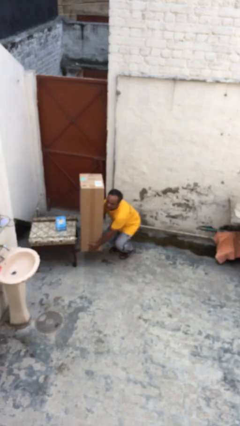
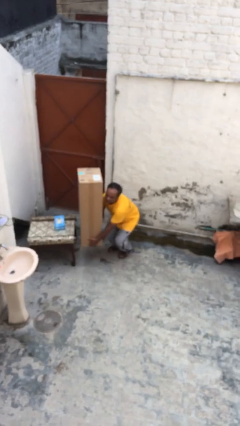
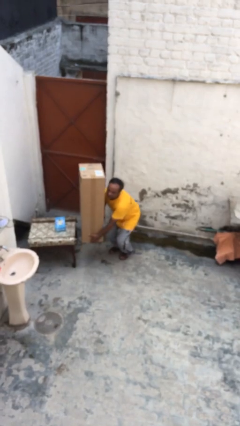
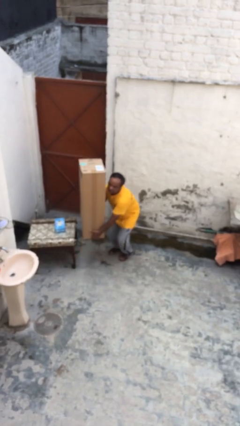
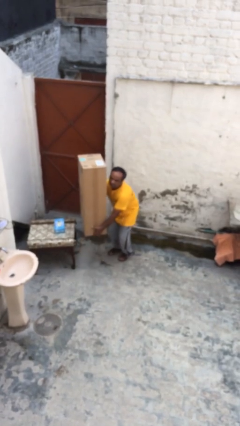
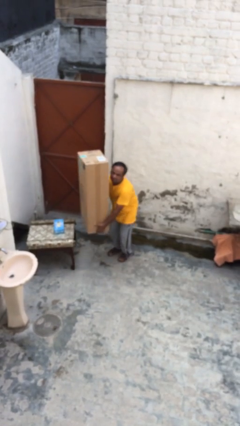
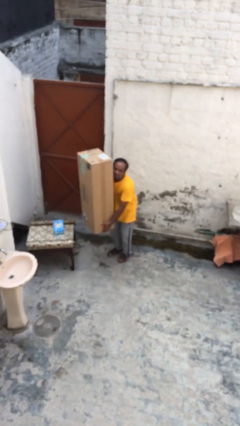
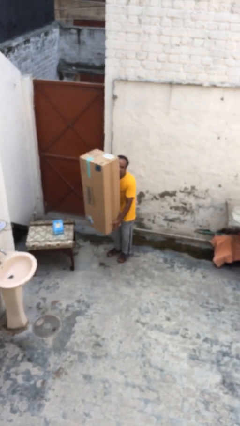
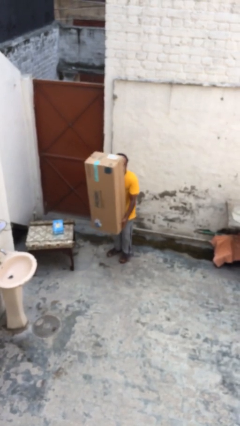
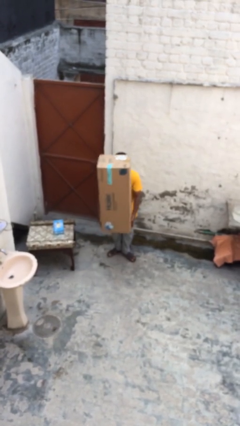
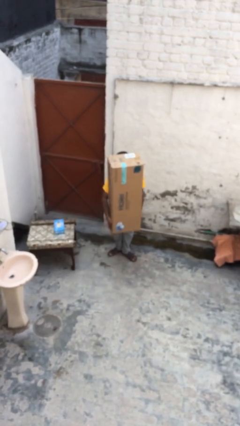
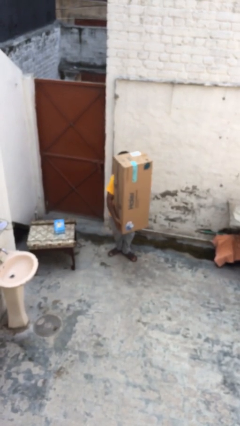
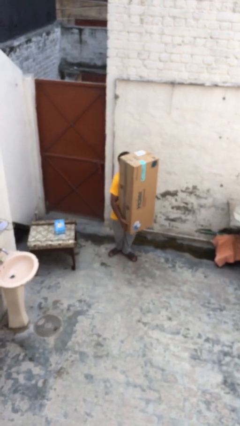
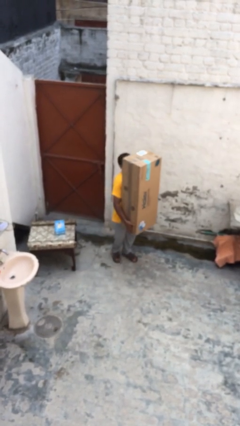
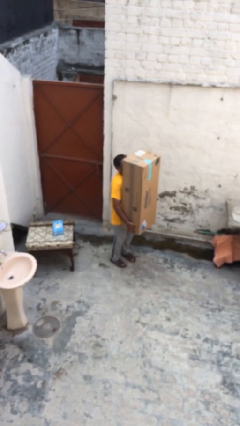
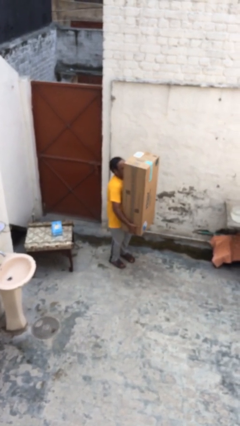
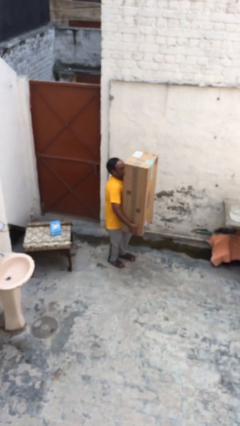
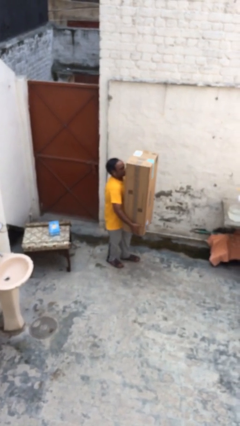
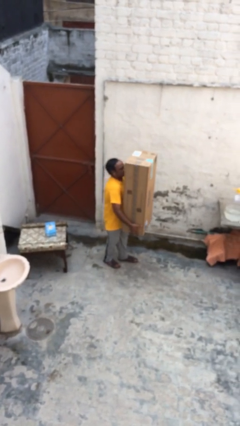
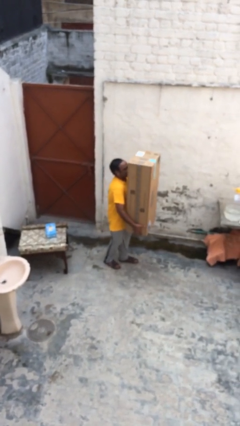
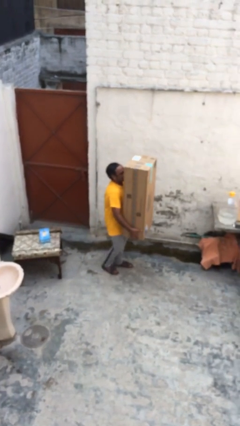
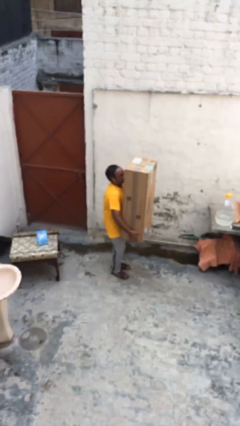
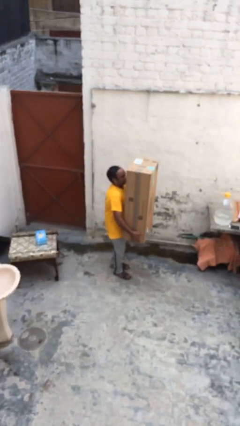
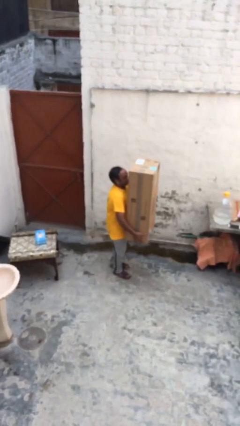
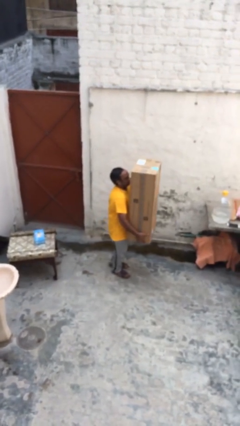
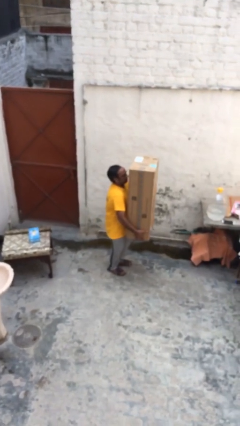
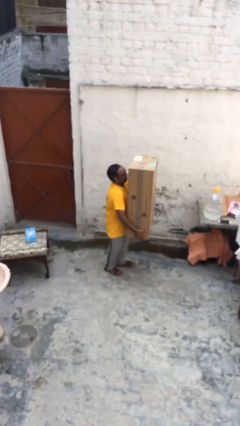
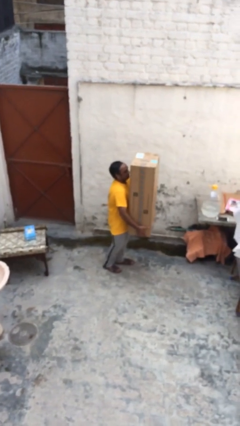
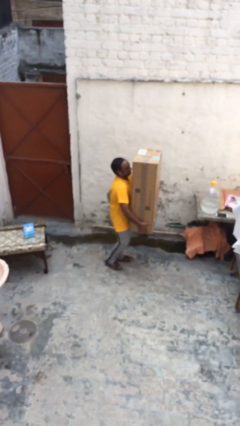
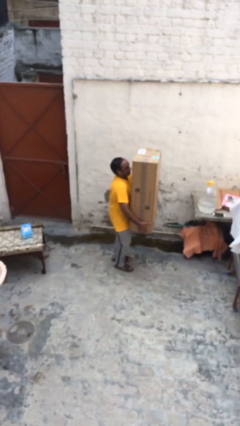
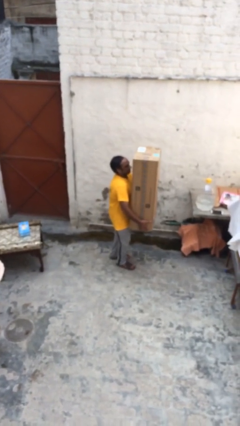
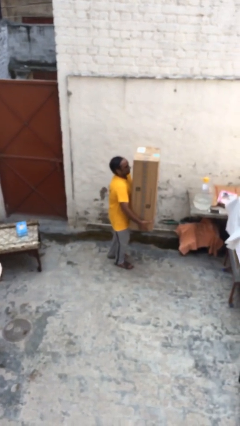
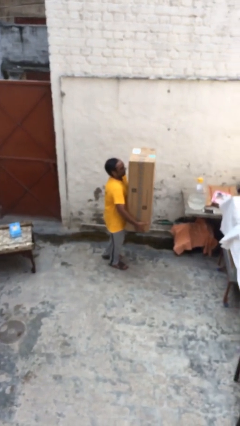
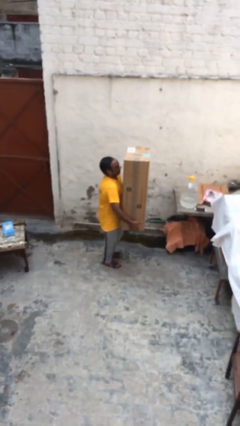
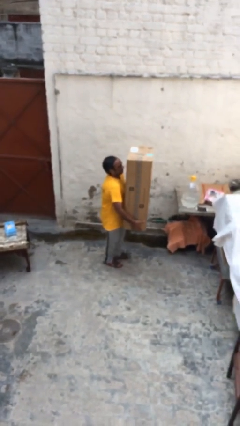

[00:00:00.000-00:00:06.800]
person carries heavy object

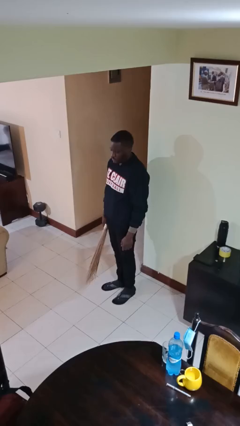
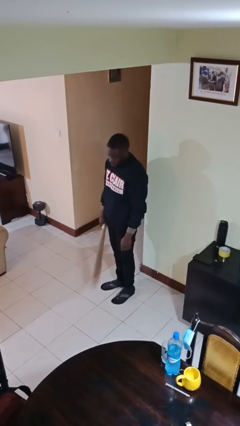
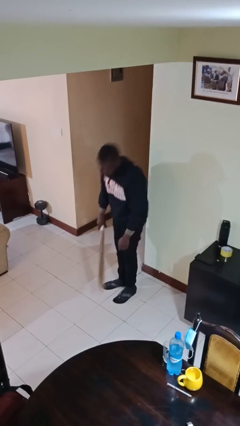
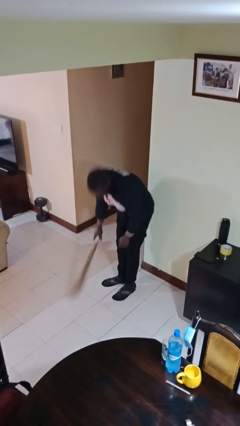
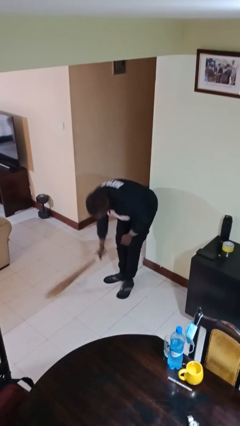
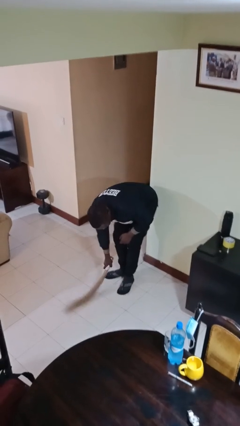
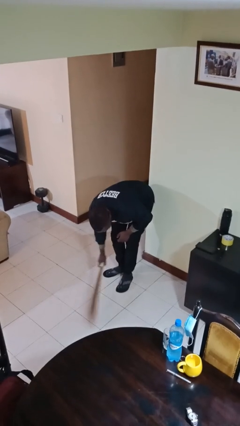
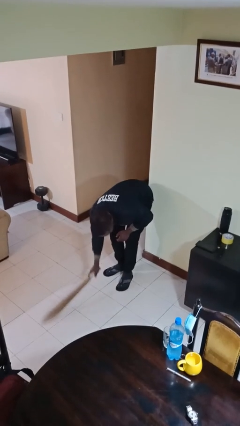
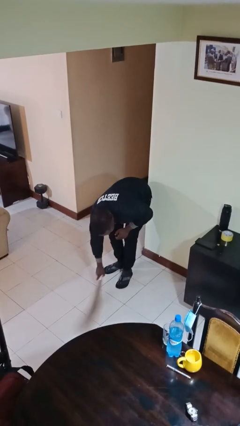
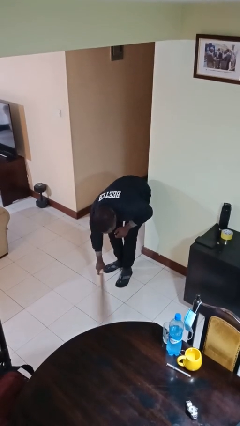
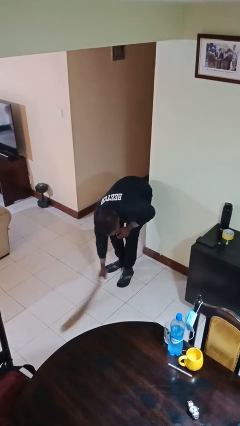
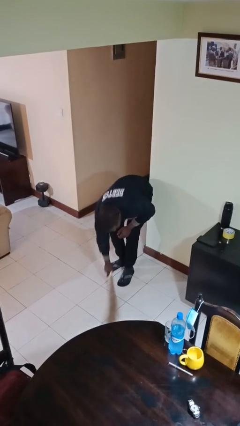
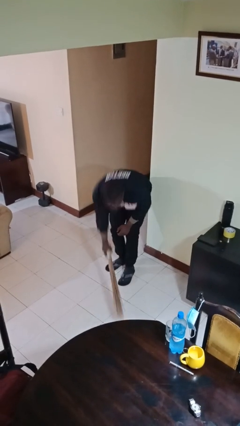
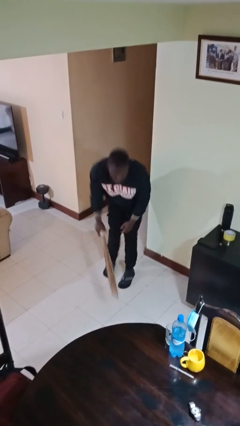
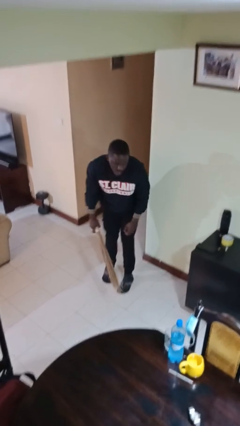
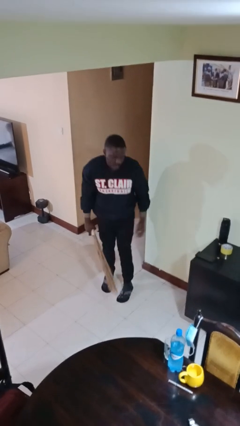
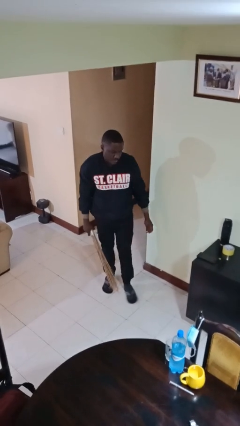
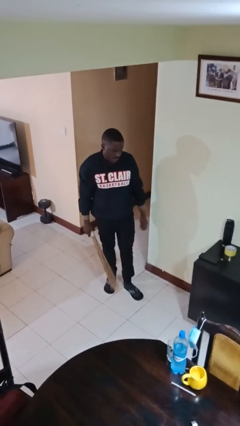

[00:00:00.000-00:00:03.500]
person sweeps floor

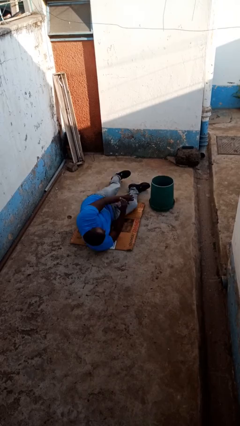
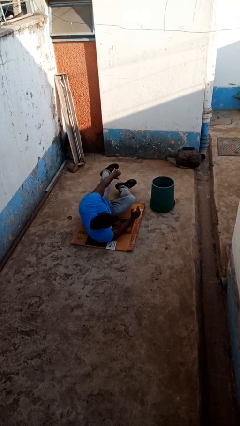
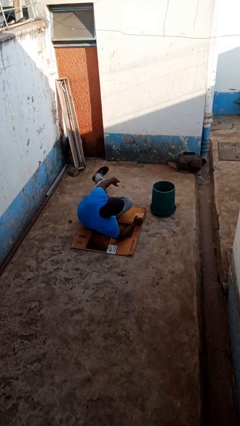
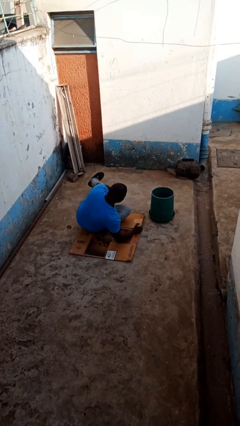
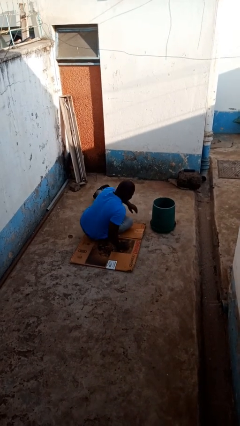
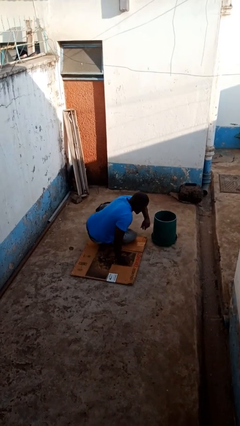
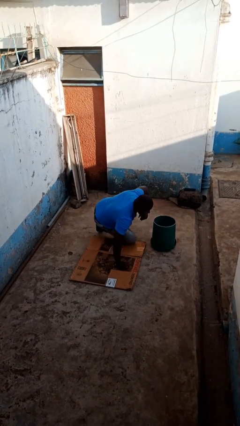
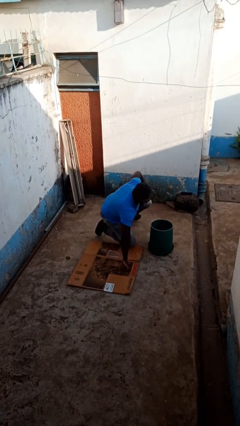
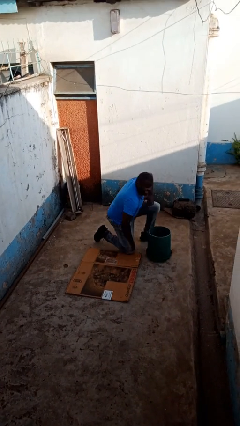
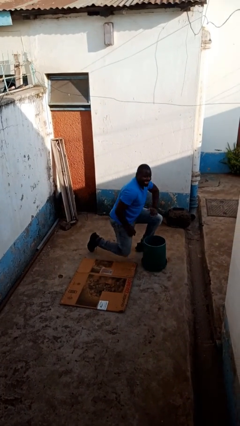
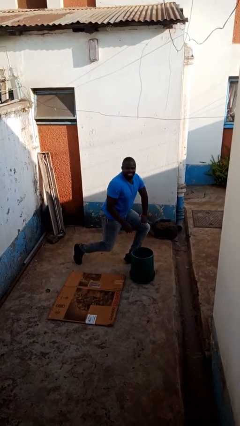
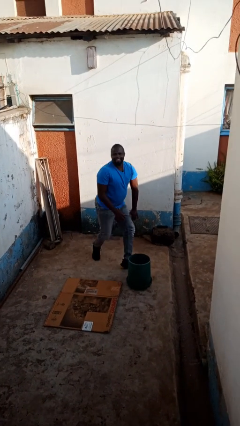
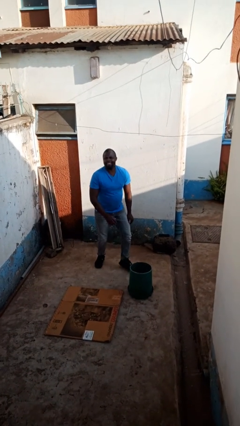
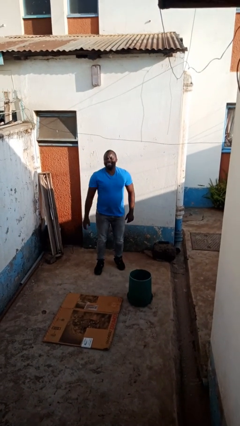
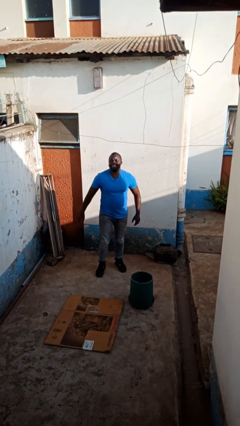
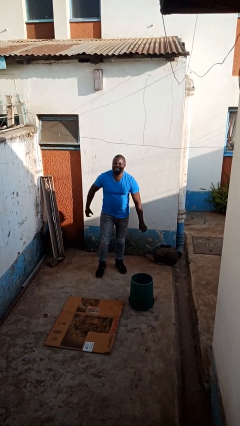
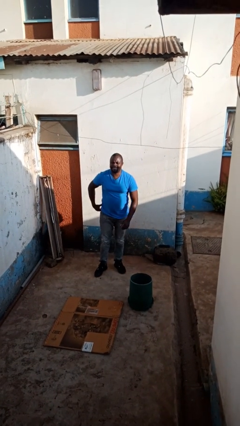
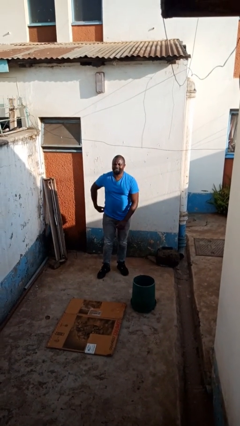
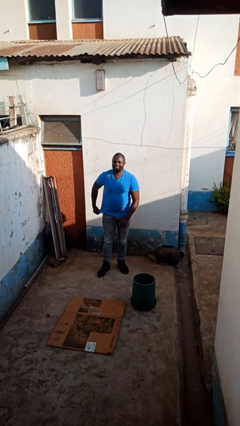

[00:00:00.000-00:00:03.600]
person stands up from floor

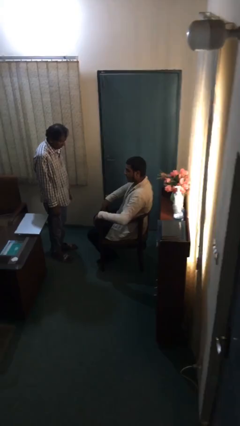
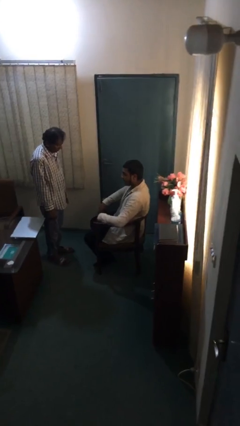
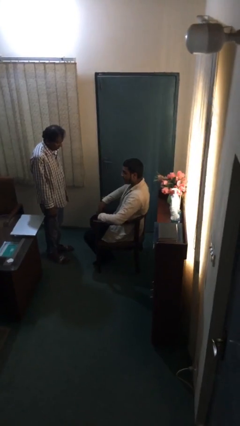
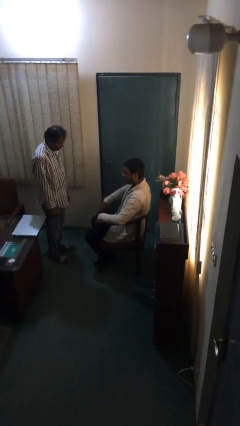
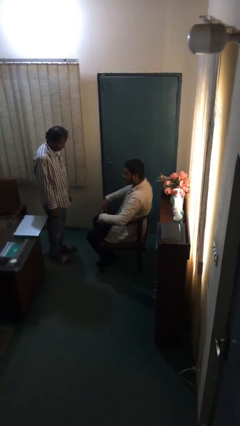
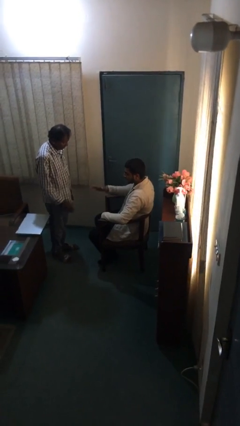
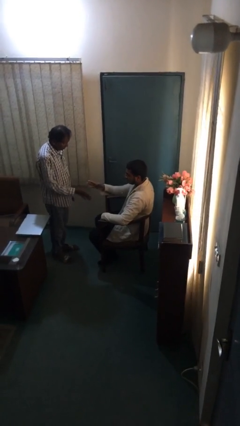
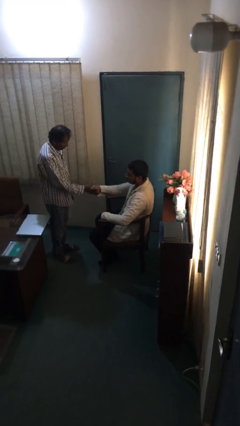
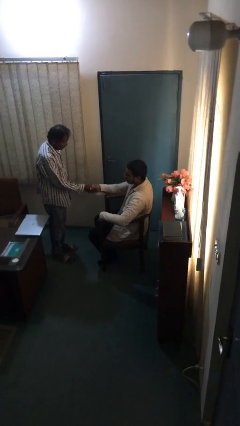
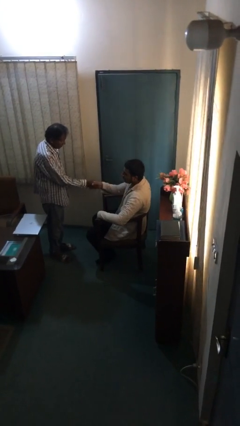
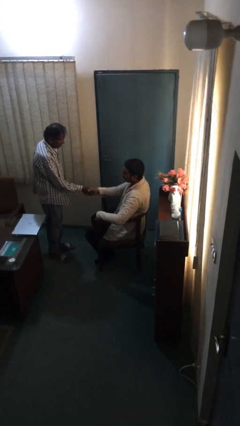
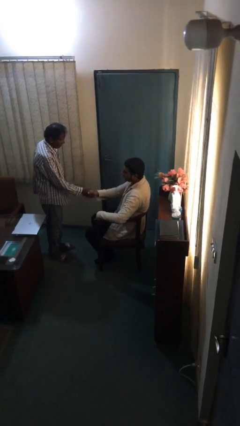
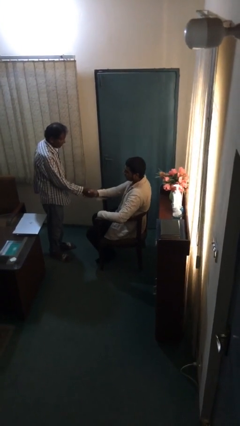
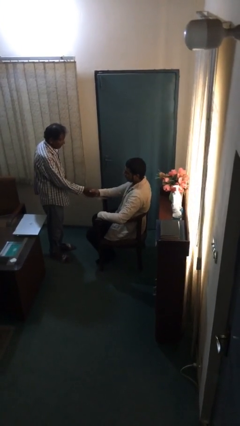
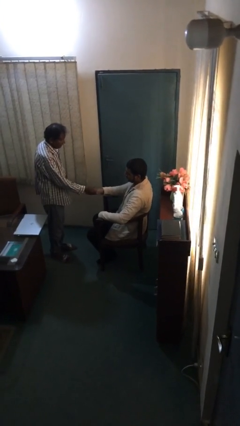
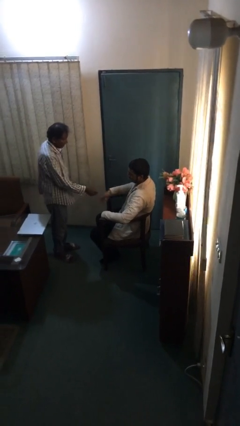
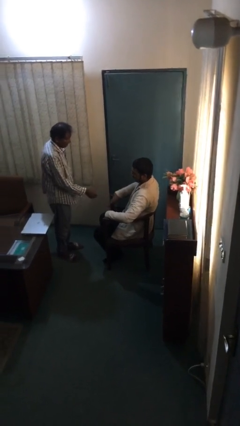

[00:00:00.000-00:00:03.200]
person shakes hand

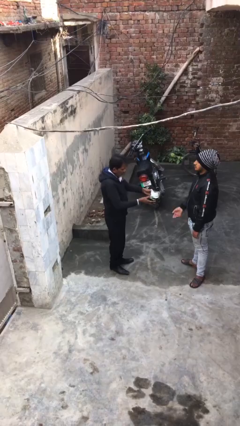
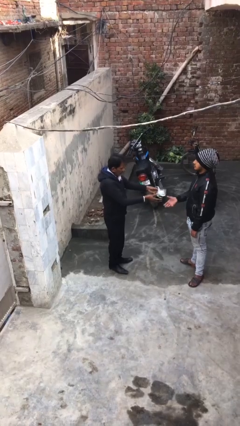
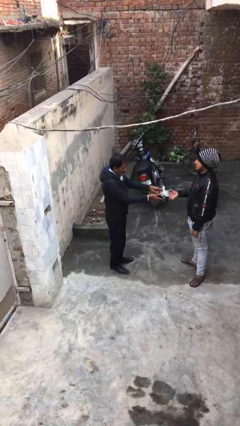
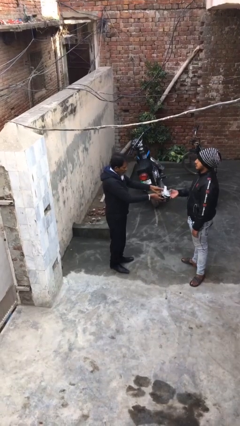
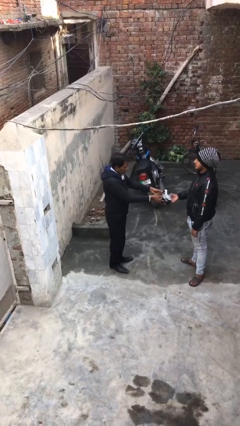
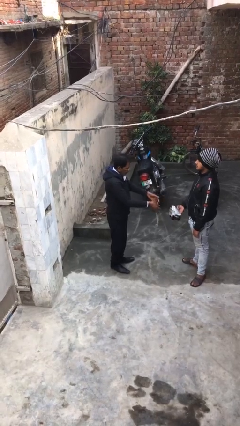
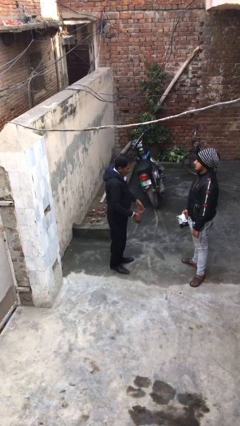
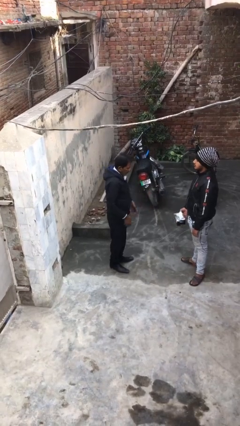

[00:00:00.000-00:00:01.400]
person transfers object to person
